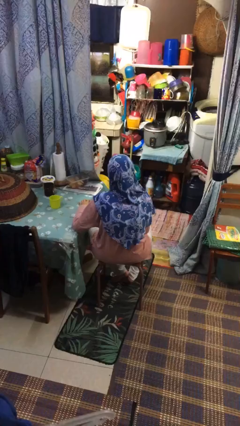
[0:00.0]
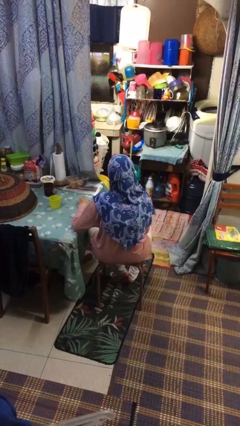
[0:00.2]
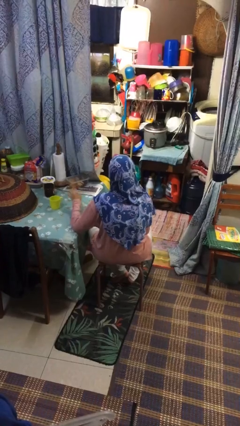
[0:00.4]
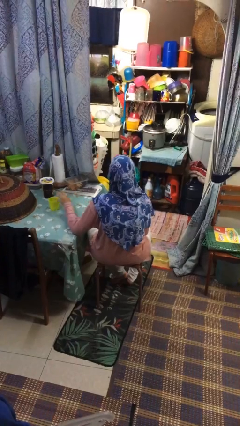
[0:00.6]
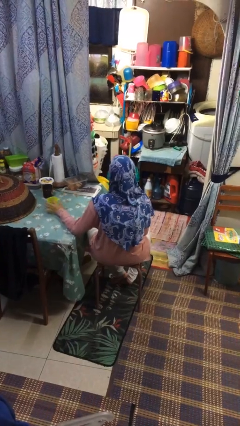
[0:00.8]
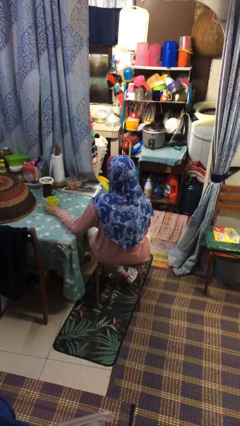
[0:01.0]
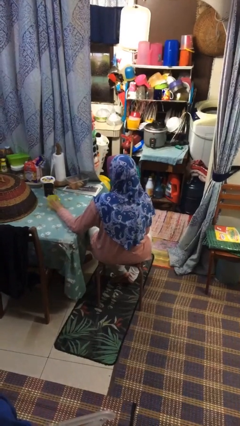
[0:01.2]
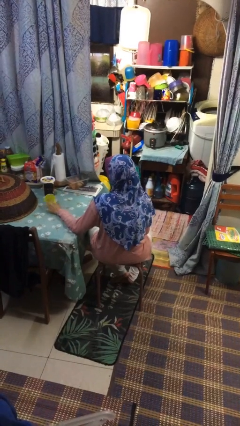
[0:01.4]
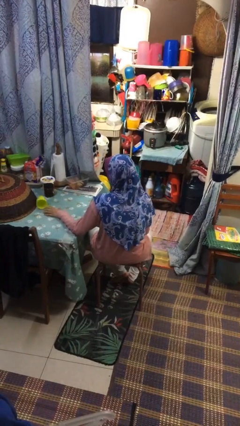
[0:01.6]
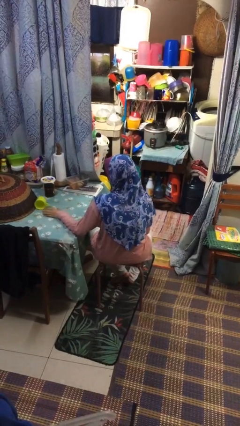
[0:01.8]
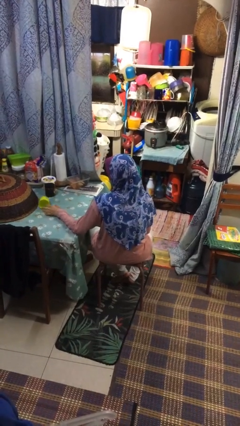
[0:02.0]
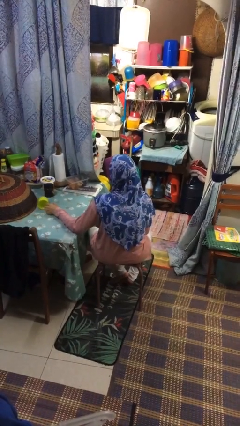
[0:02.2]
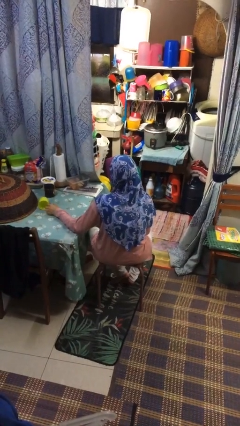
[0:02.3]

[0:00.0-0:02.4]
person knocks over glass

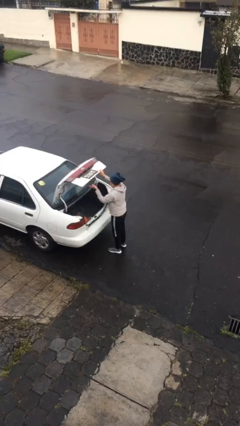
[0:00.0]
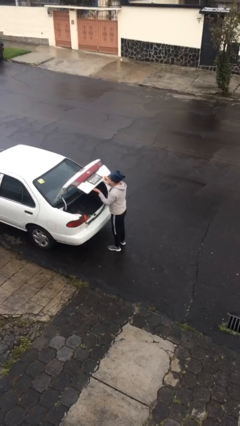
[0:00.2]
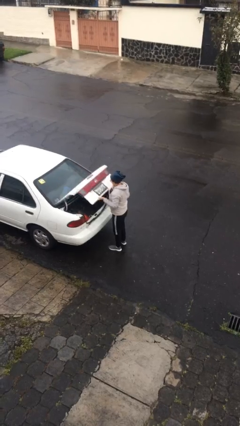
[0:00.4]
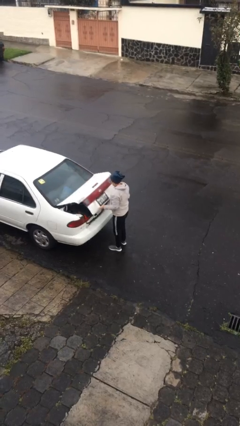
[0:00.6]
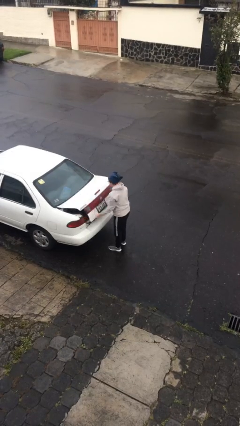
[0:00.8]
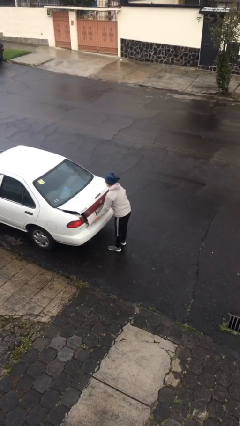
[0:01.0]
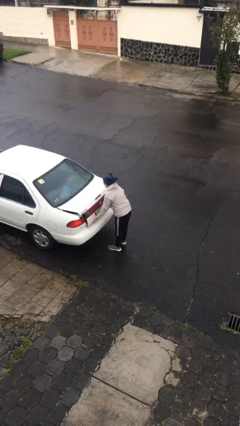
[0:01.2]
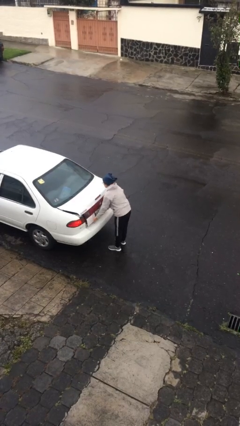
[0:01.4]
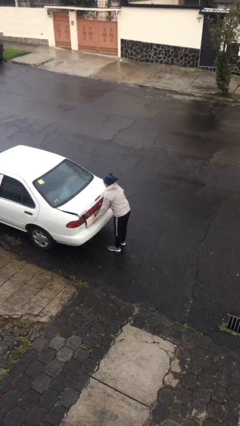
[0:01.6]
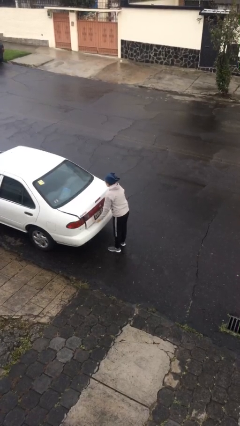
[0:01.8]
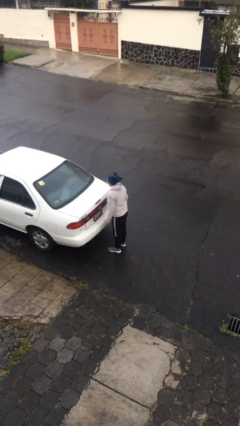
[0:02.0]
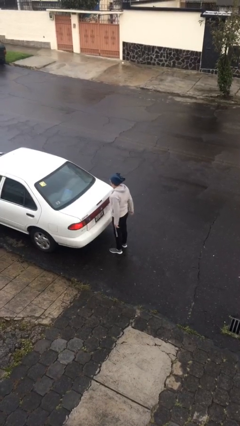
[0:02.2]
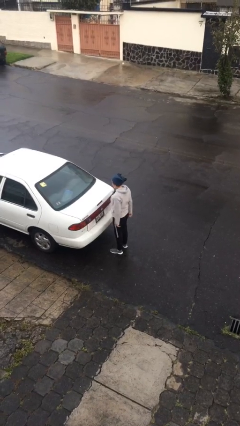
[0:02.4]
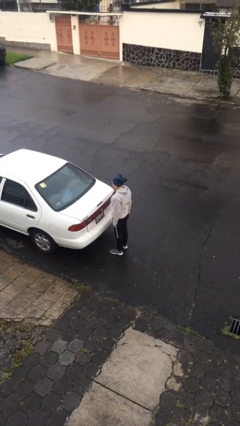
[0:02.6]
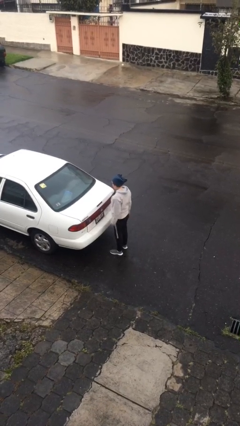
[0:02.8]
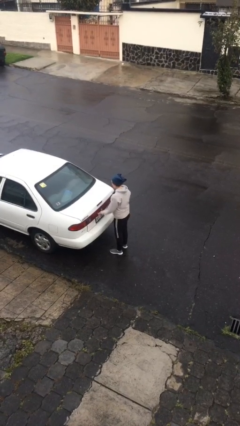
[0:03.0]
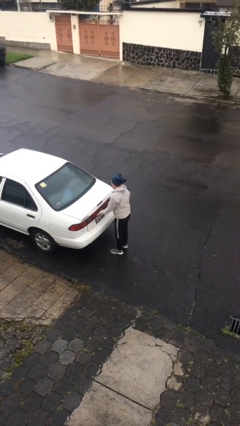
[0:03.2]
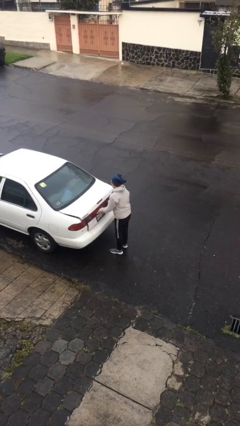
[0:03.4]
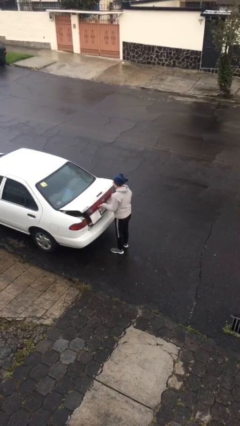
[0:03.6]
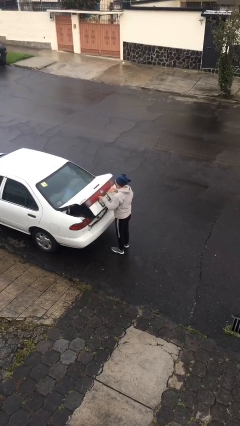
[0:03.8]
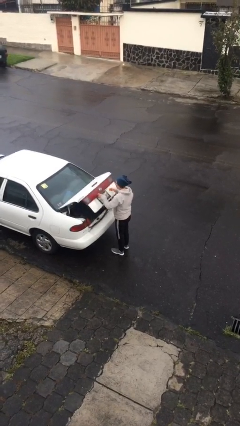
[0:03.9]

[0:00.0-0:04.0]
person closes car trunk

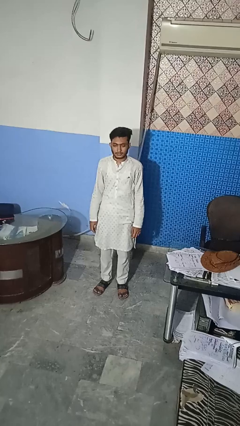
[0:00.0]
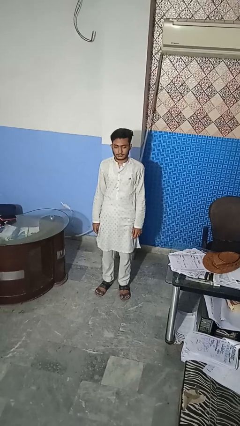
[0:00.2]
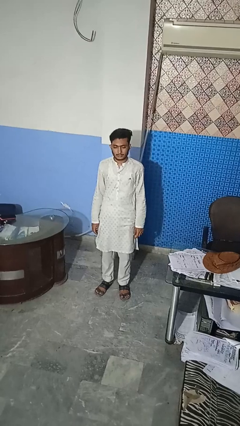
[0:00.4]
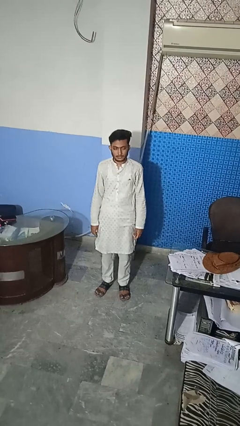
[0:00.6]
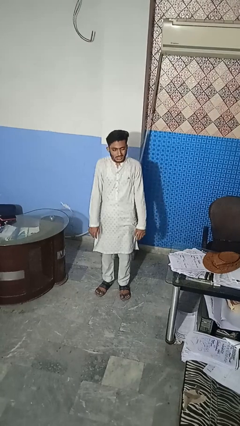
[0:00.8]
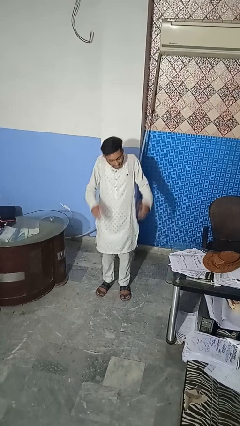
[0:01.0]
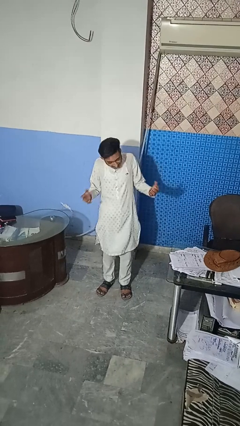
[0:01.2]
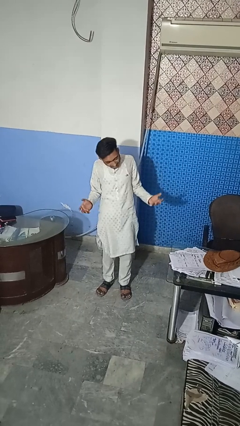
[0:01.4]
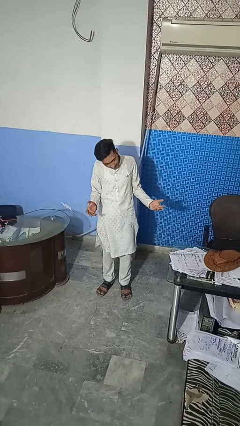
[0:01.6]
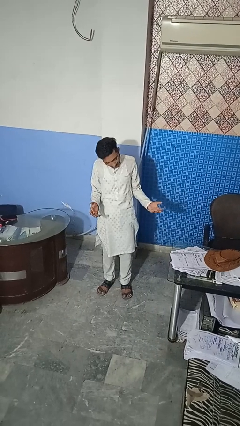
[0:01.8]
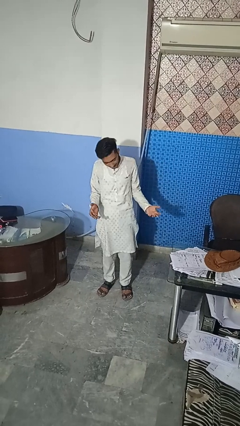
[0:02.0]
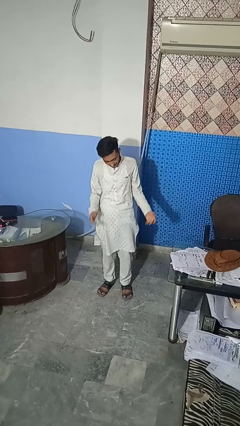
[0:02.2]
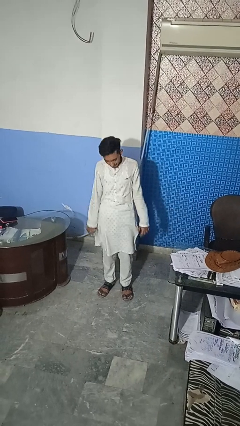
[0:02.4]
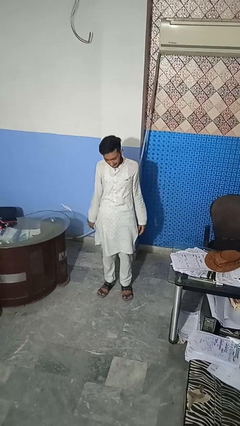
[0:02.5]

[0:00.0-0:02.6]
person shrugs

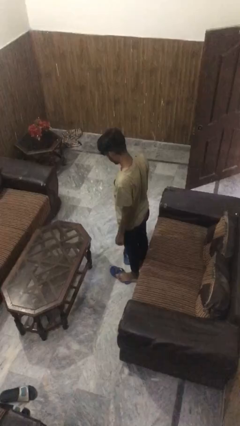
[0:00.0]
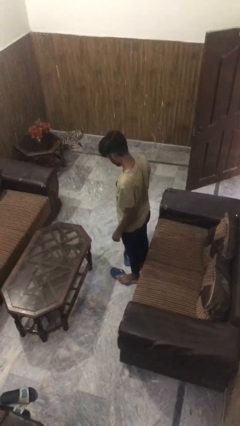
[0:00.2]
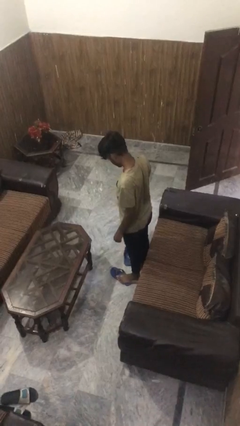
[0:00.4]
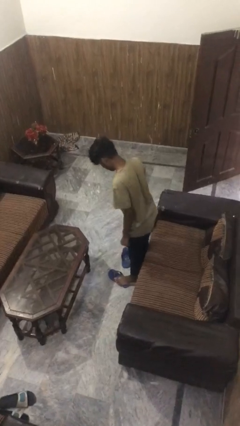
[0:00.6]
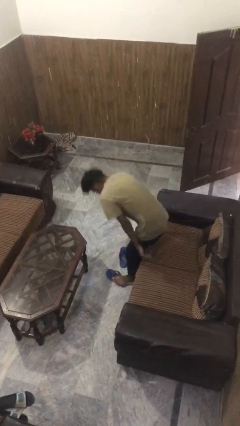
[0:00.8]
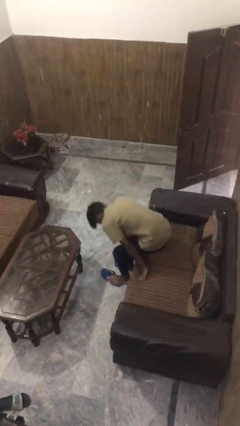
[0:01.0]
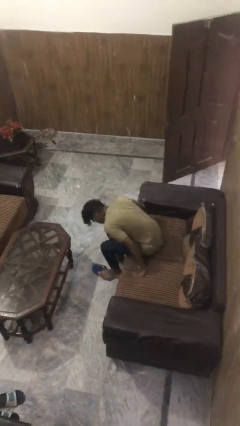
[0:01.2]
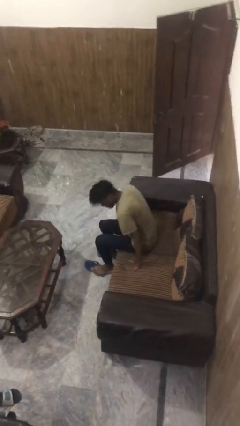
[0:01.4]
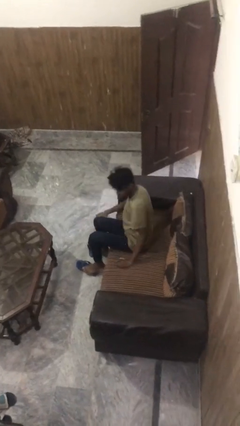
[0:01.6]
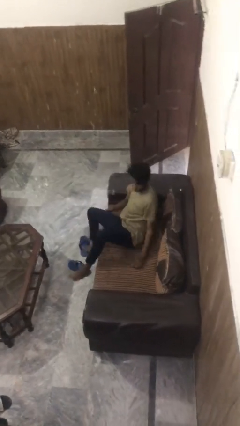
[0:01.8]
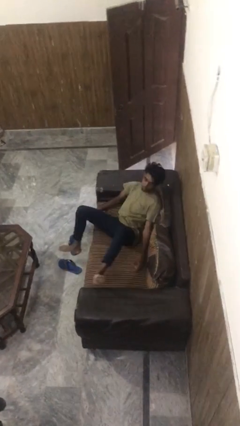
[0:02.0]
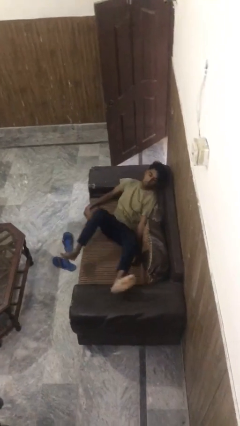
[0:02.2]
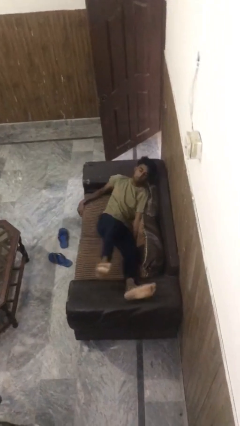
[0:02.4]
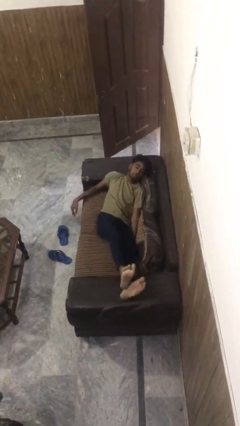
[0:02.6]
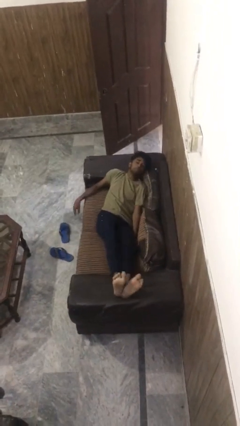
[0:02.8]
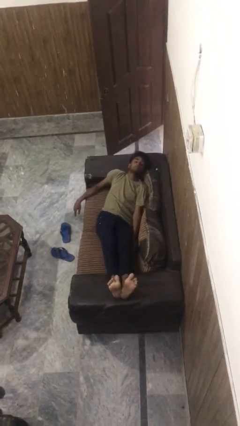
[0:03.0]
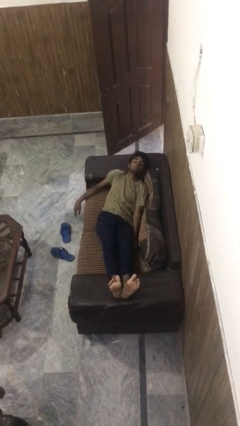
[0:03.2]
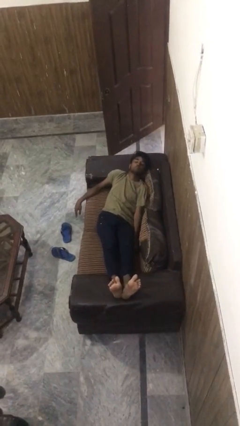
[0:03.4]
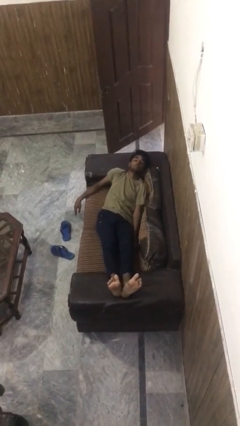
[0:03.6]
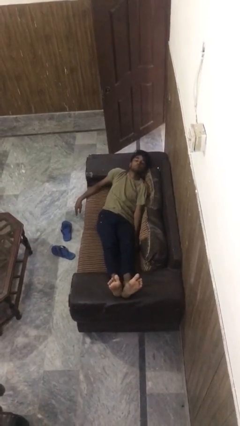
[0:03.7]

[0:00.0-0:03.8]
person lies down on couch

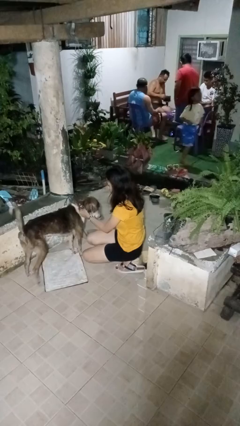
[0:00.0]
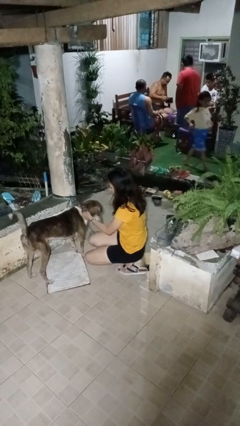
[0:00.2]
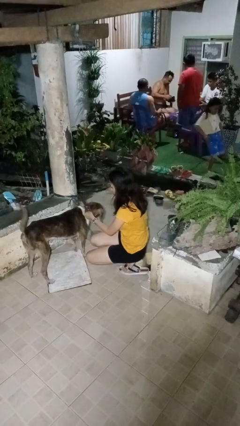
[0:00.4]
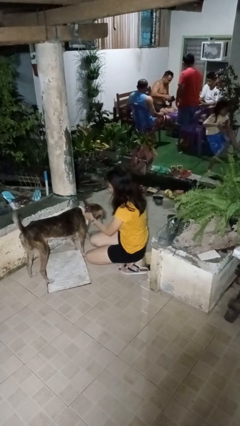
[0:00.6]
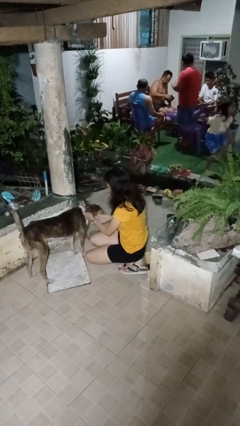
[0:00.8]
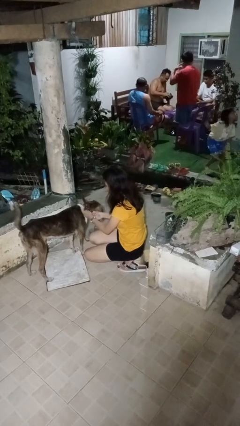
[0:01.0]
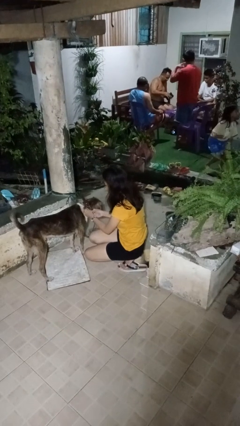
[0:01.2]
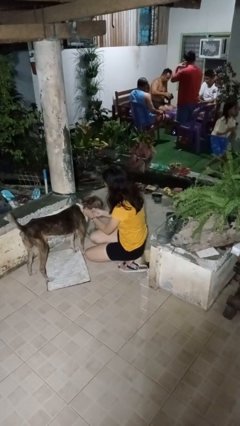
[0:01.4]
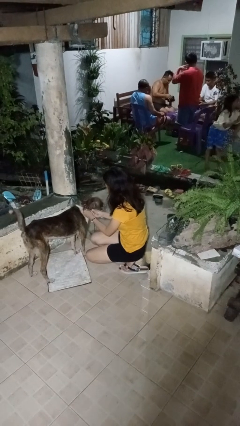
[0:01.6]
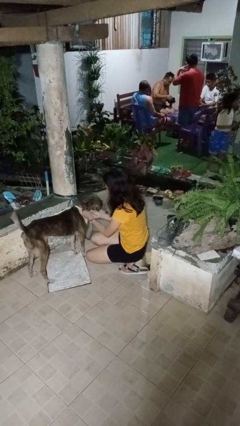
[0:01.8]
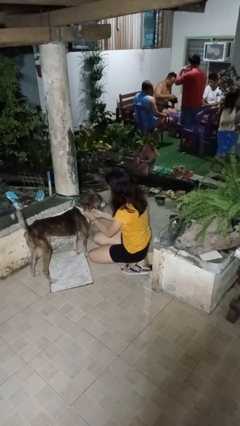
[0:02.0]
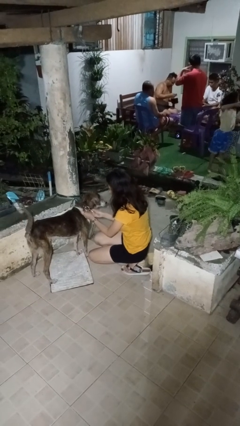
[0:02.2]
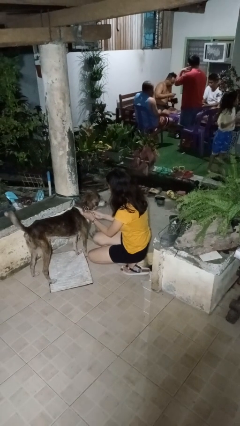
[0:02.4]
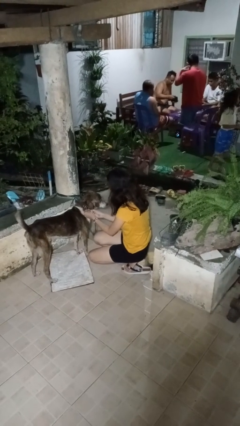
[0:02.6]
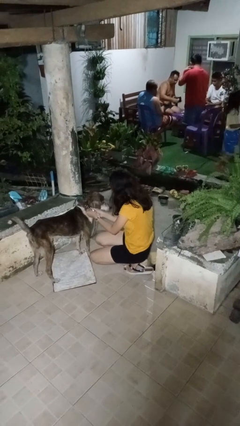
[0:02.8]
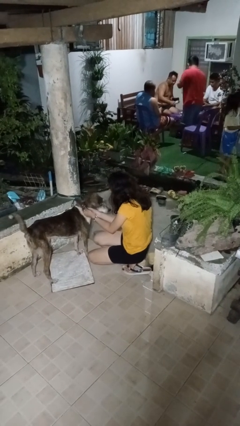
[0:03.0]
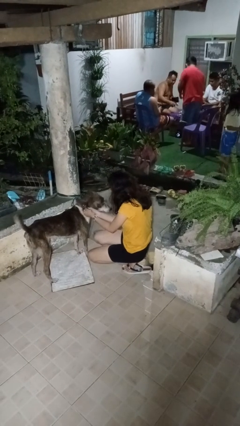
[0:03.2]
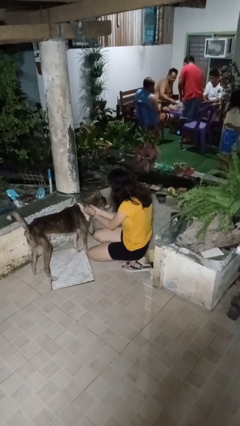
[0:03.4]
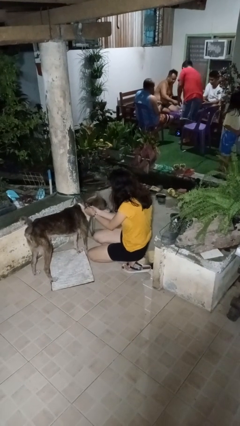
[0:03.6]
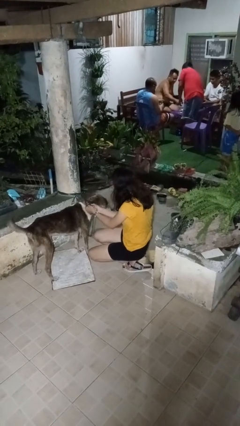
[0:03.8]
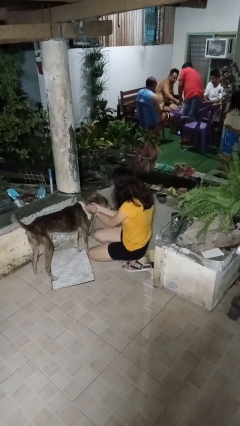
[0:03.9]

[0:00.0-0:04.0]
person attaches leash to dog

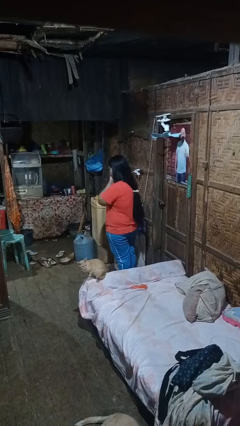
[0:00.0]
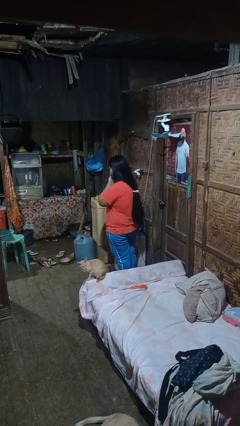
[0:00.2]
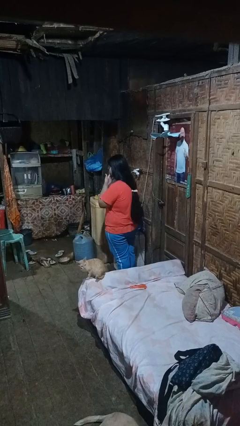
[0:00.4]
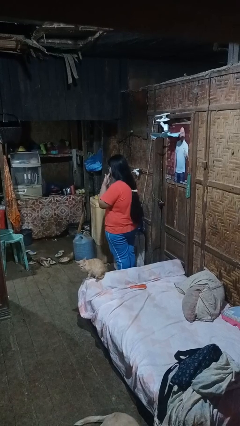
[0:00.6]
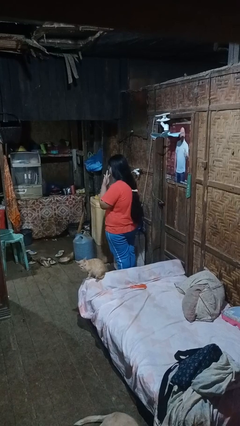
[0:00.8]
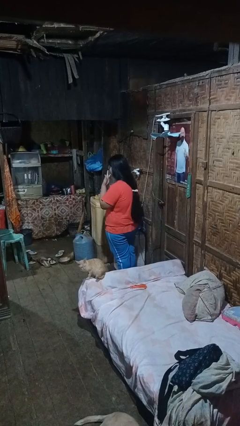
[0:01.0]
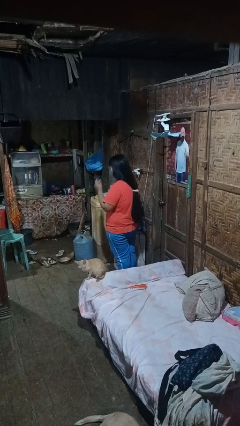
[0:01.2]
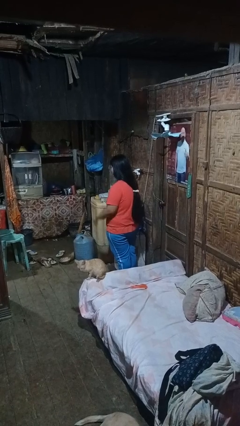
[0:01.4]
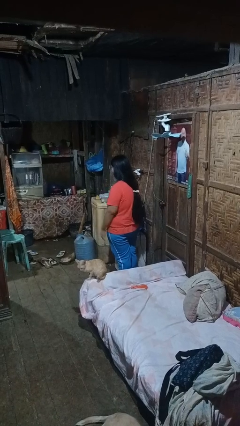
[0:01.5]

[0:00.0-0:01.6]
person licks fingers
